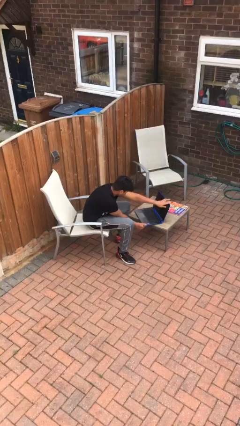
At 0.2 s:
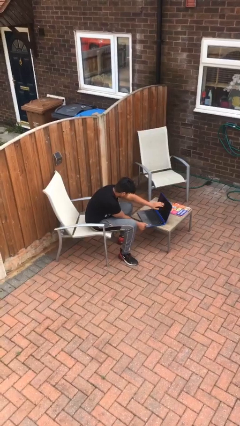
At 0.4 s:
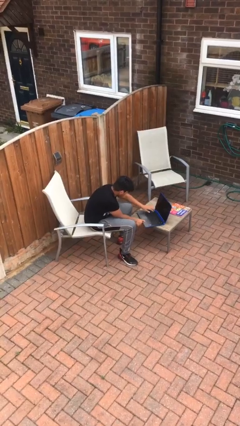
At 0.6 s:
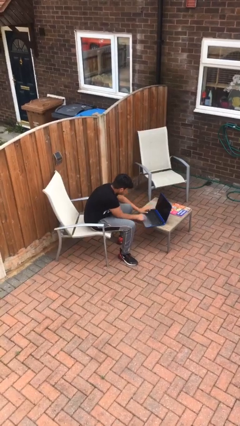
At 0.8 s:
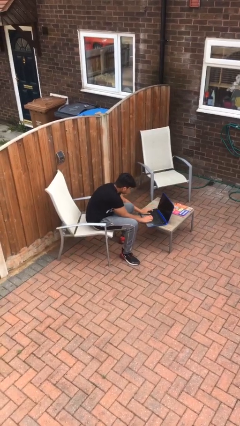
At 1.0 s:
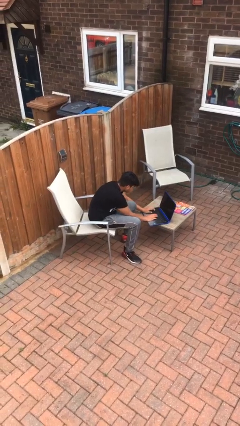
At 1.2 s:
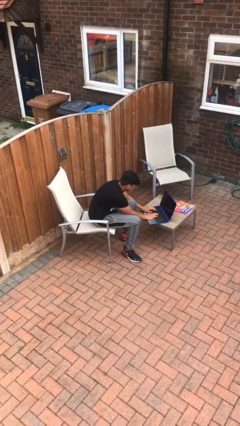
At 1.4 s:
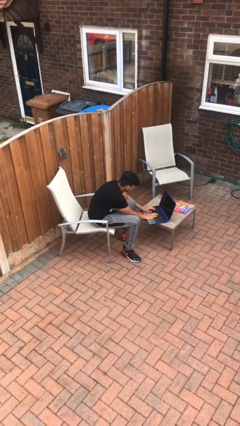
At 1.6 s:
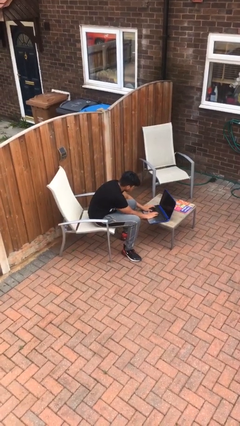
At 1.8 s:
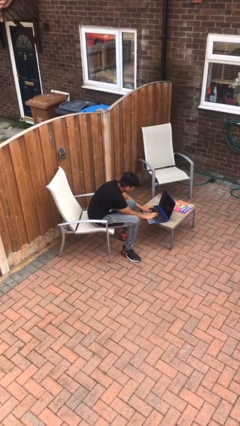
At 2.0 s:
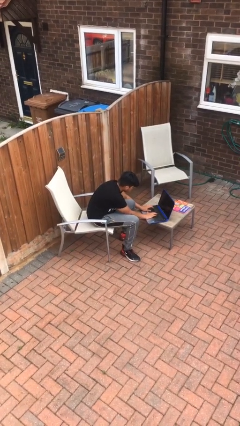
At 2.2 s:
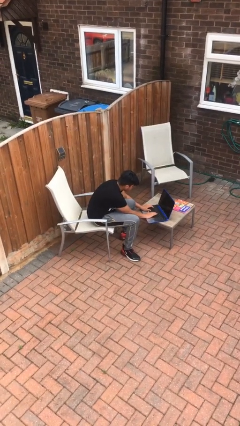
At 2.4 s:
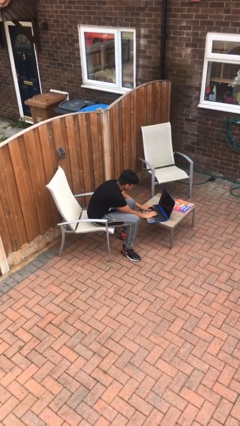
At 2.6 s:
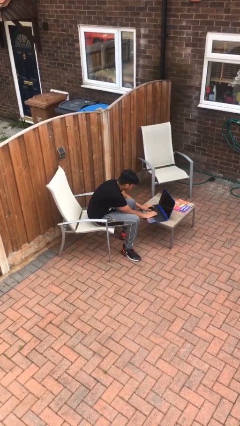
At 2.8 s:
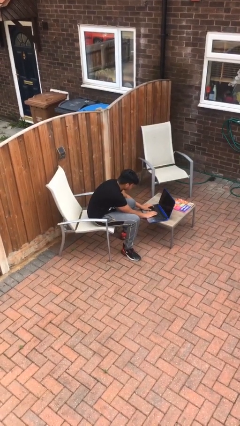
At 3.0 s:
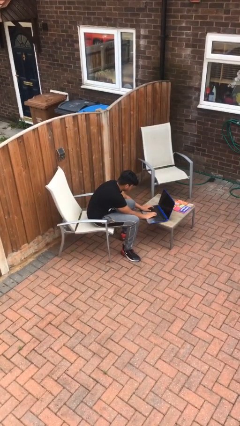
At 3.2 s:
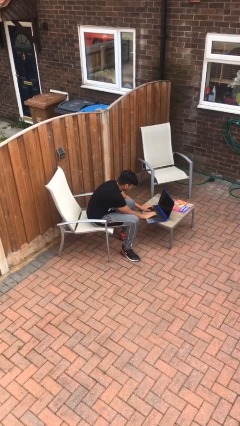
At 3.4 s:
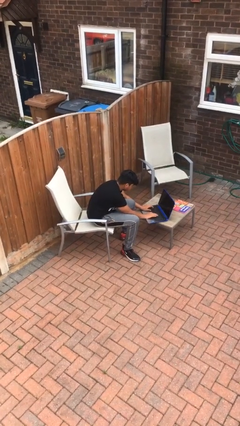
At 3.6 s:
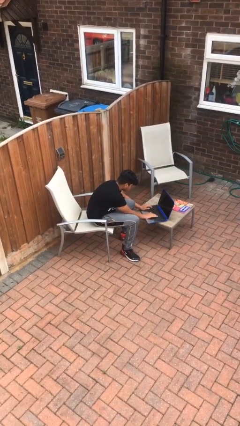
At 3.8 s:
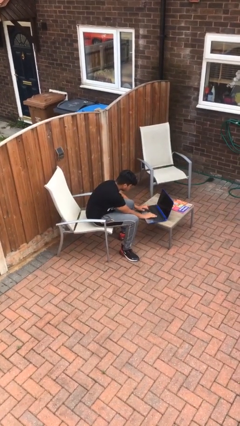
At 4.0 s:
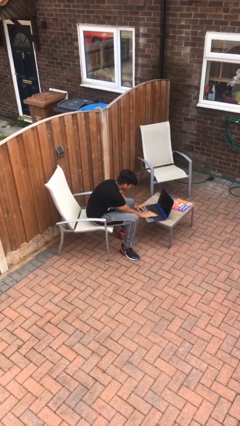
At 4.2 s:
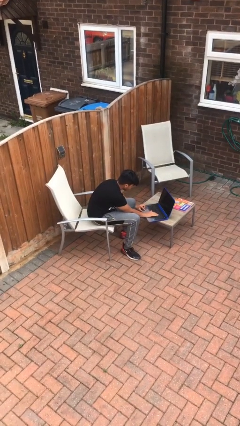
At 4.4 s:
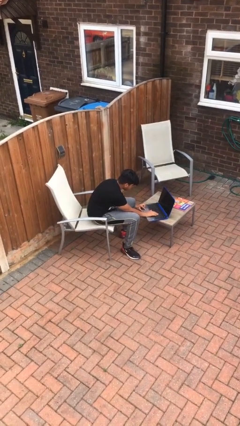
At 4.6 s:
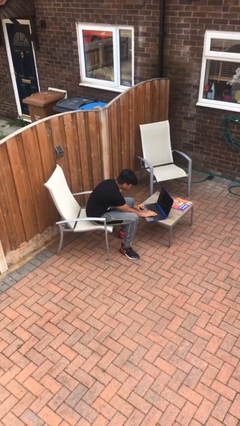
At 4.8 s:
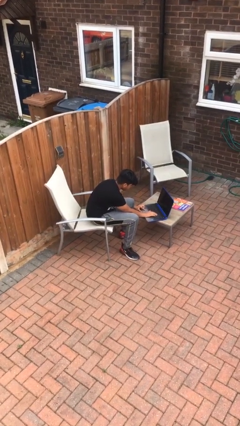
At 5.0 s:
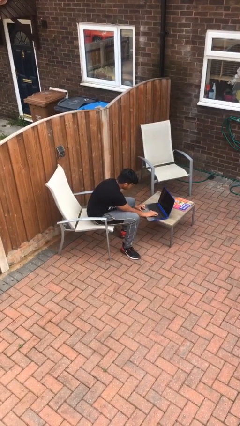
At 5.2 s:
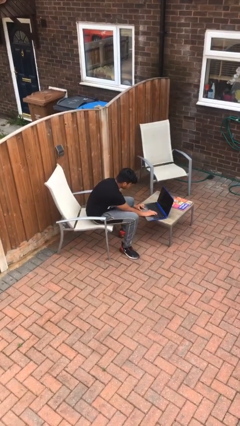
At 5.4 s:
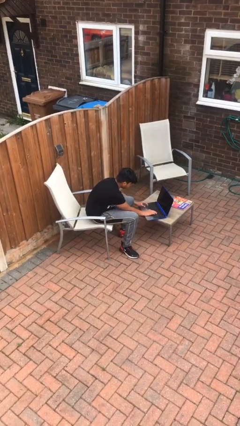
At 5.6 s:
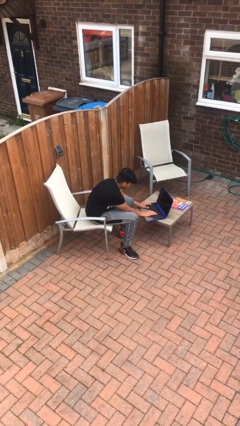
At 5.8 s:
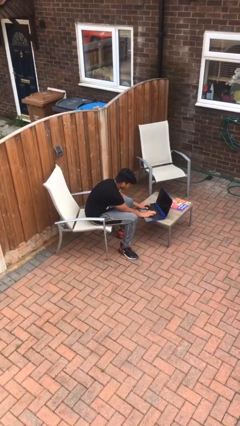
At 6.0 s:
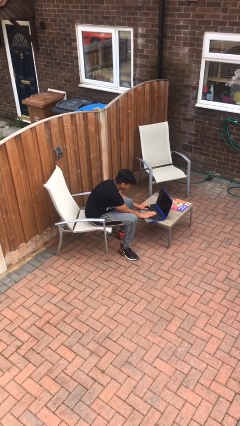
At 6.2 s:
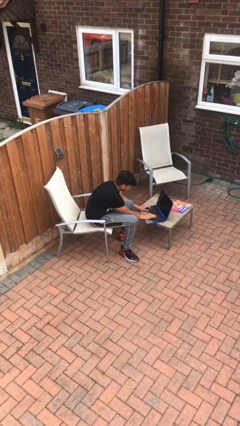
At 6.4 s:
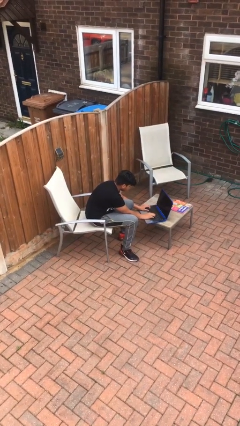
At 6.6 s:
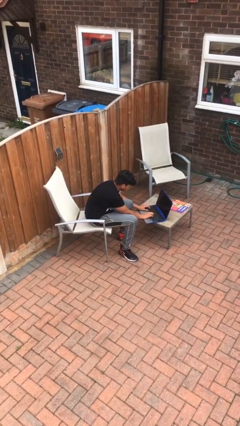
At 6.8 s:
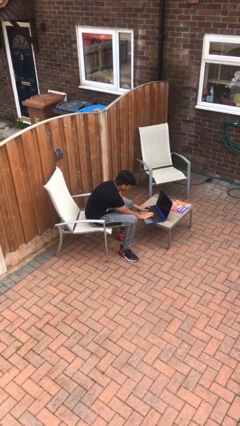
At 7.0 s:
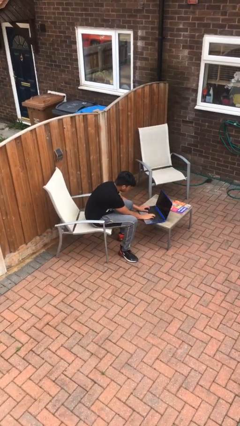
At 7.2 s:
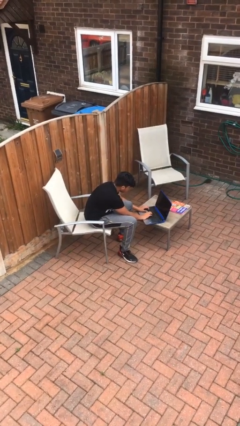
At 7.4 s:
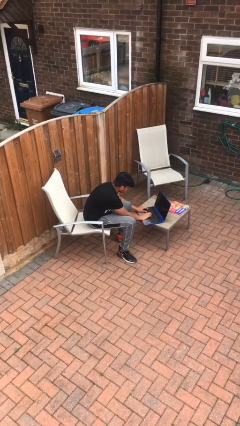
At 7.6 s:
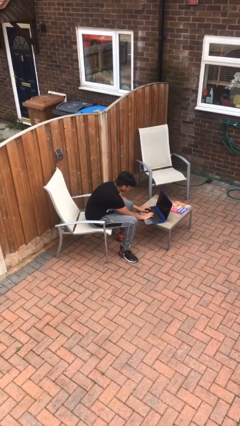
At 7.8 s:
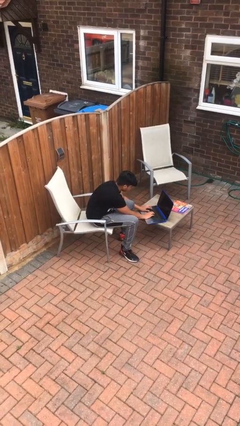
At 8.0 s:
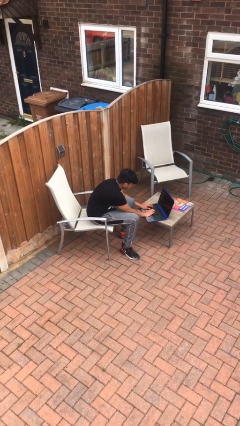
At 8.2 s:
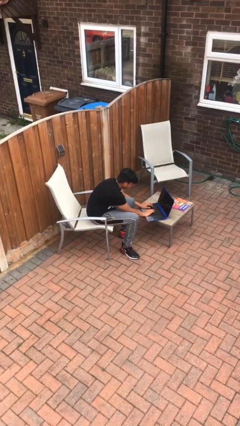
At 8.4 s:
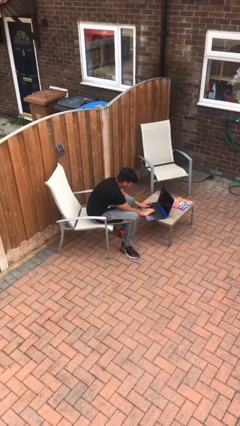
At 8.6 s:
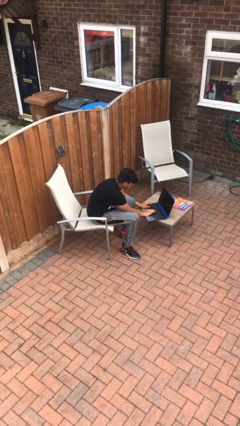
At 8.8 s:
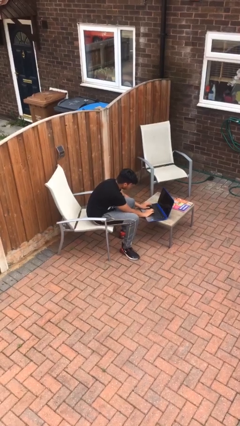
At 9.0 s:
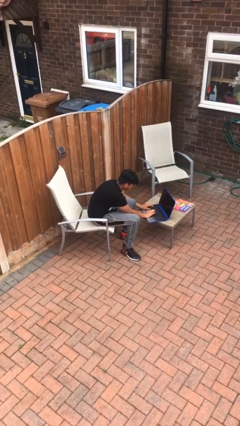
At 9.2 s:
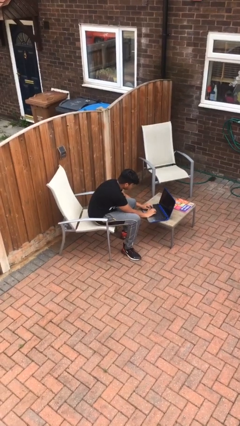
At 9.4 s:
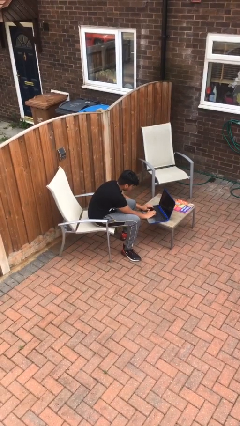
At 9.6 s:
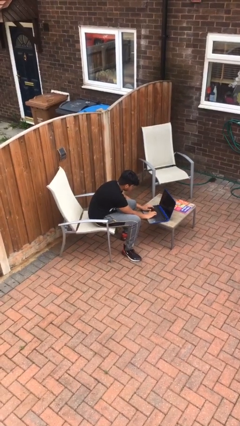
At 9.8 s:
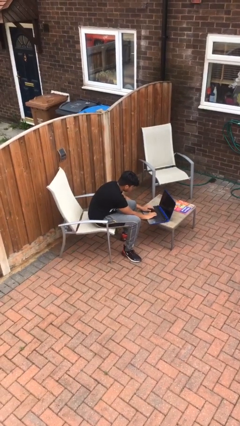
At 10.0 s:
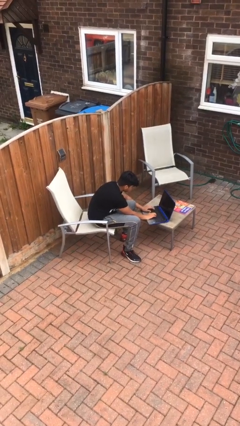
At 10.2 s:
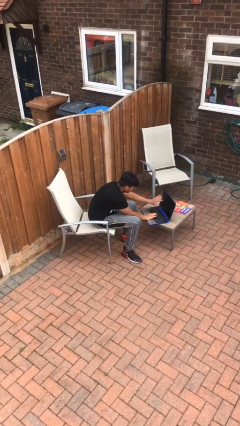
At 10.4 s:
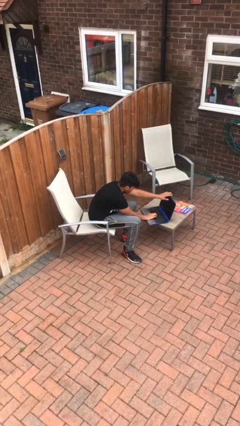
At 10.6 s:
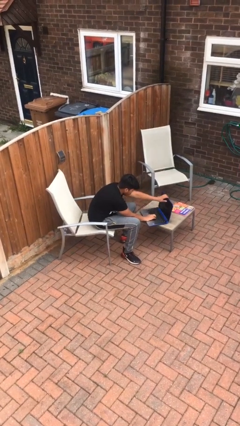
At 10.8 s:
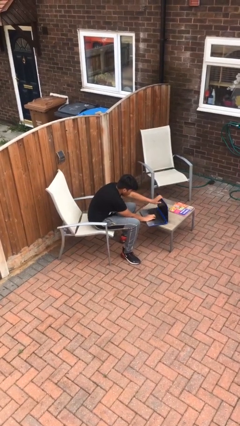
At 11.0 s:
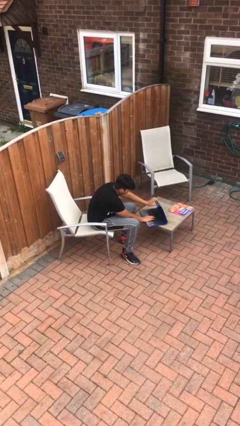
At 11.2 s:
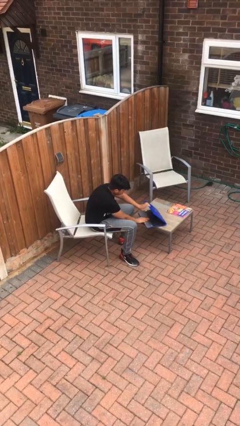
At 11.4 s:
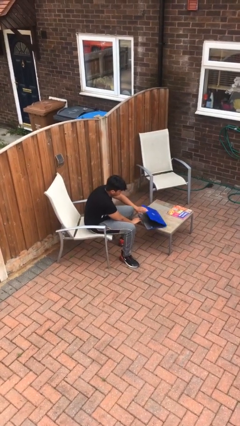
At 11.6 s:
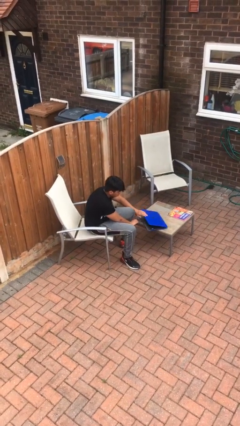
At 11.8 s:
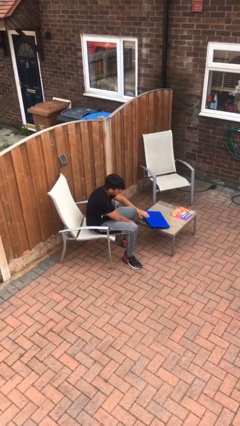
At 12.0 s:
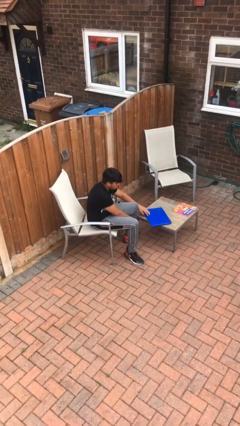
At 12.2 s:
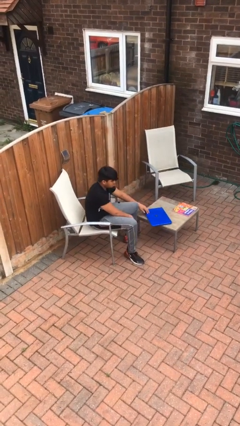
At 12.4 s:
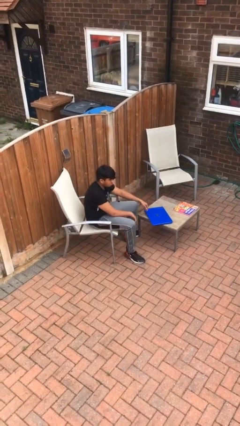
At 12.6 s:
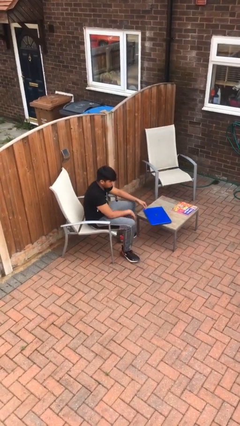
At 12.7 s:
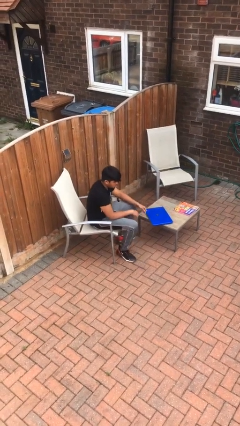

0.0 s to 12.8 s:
person interacts with laptop

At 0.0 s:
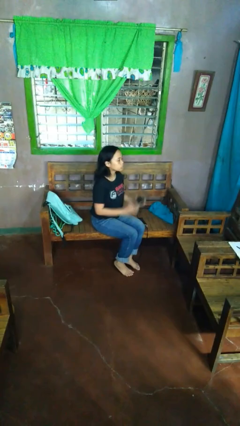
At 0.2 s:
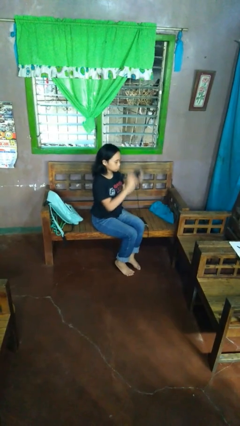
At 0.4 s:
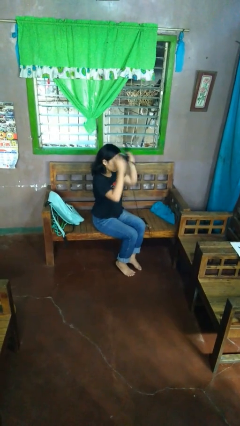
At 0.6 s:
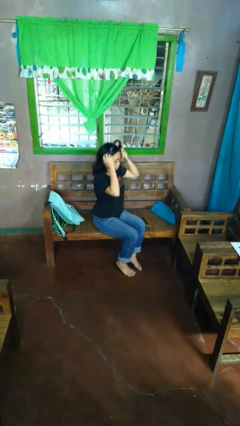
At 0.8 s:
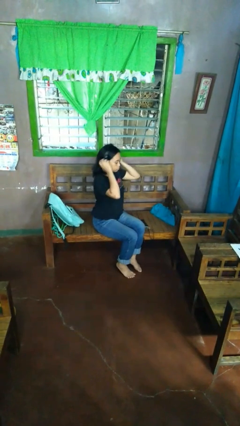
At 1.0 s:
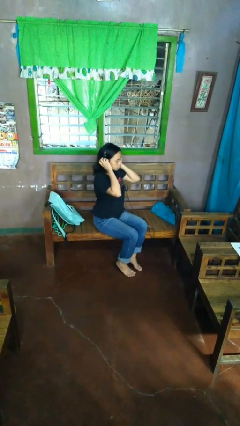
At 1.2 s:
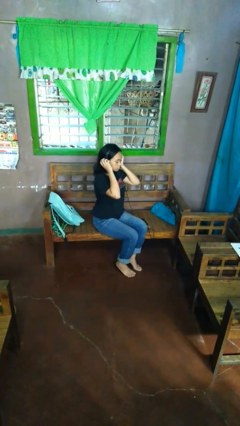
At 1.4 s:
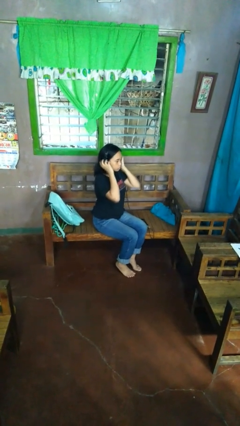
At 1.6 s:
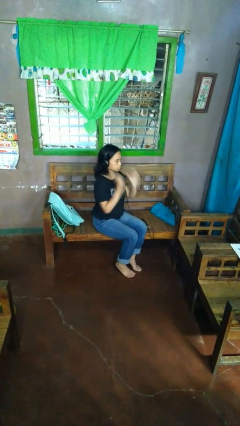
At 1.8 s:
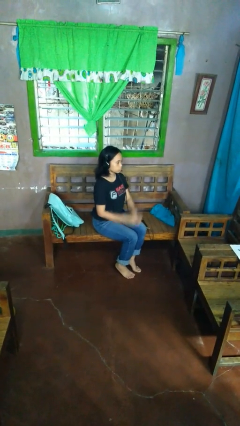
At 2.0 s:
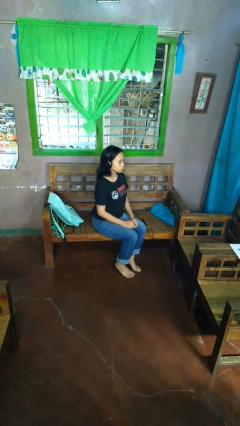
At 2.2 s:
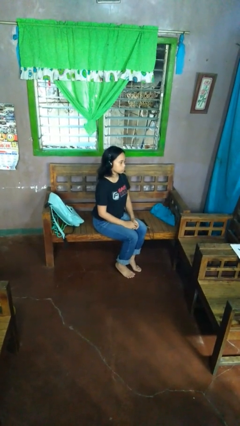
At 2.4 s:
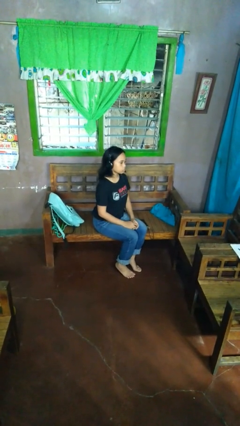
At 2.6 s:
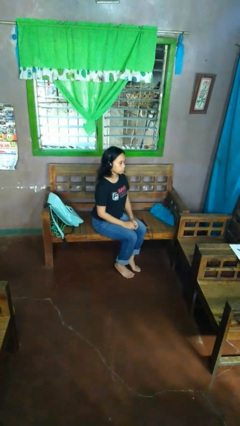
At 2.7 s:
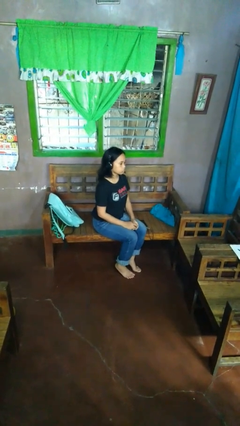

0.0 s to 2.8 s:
person puts on headphones

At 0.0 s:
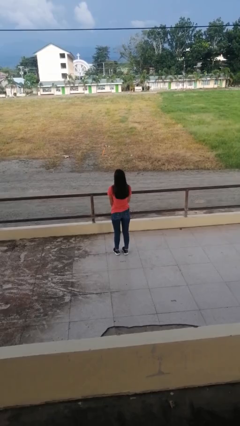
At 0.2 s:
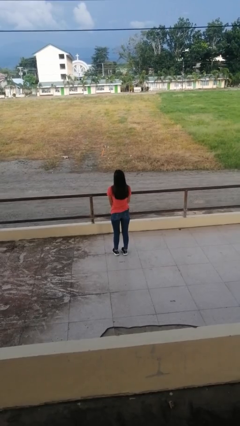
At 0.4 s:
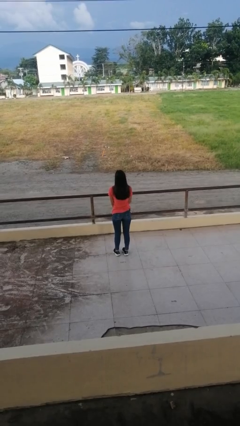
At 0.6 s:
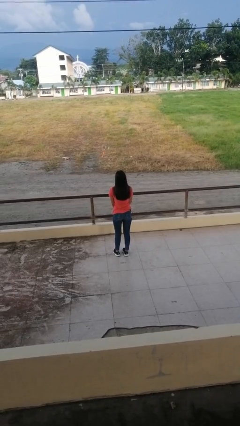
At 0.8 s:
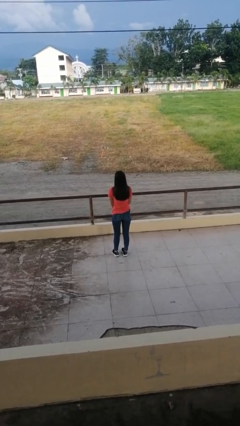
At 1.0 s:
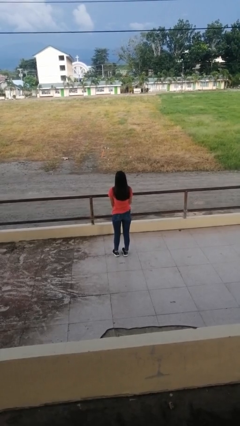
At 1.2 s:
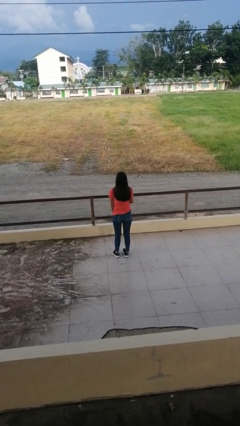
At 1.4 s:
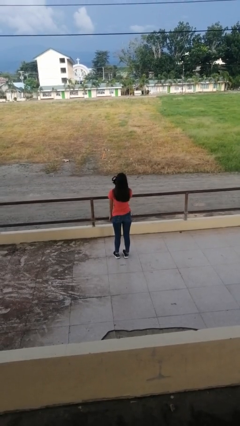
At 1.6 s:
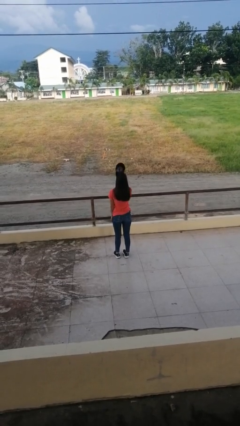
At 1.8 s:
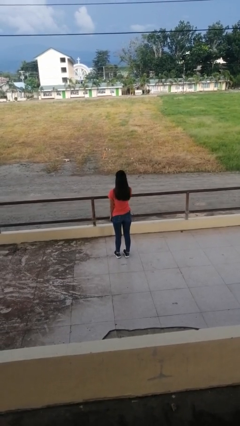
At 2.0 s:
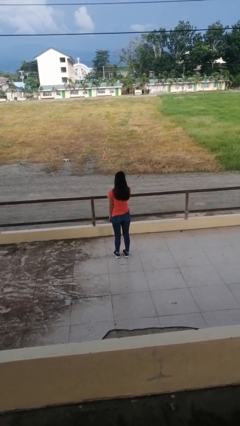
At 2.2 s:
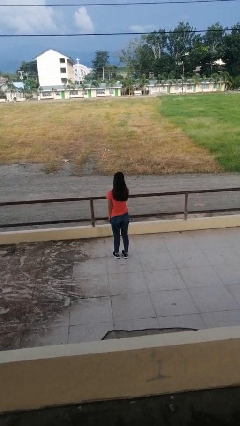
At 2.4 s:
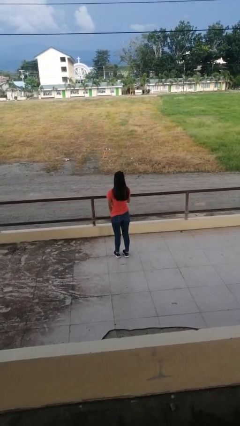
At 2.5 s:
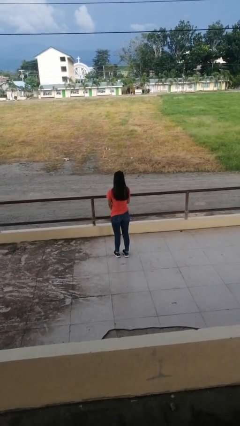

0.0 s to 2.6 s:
person puts on hat

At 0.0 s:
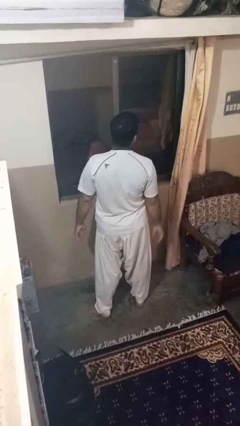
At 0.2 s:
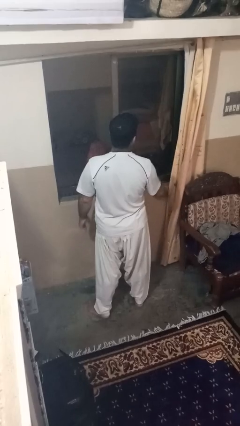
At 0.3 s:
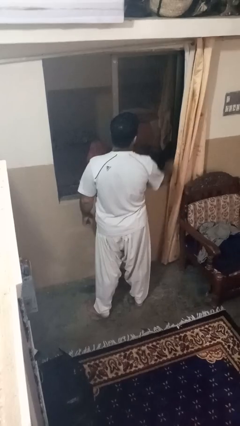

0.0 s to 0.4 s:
person closes curtains
